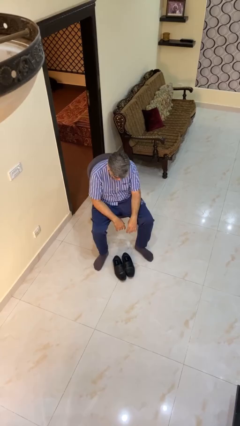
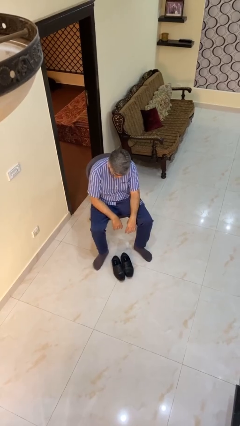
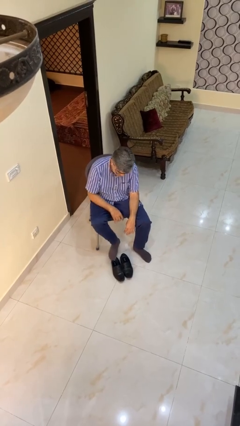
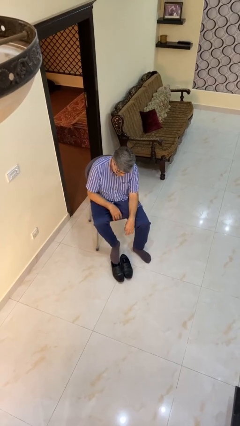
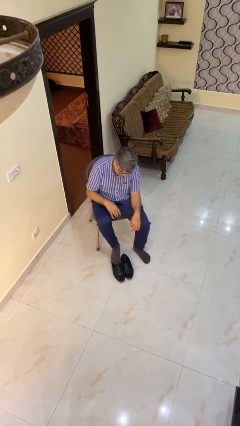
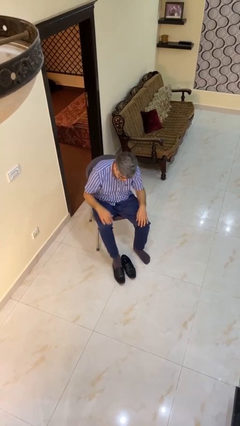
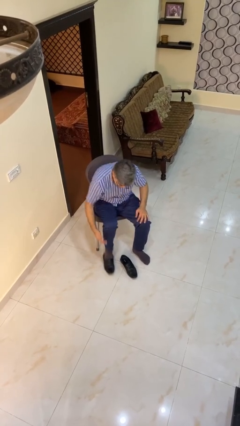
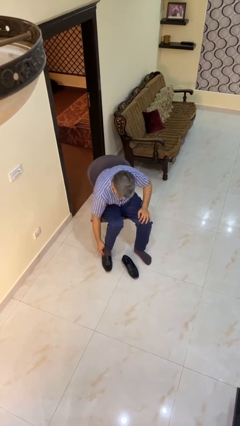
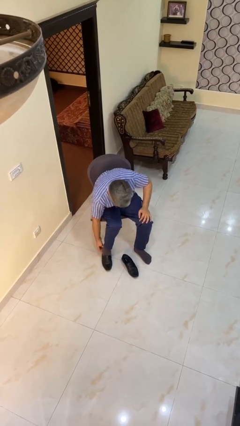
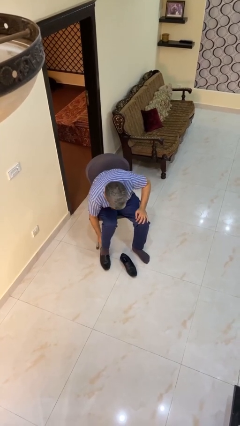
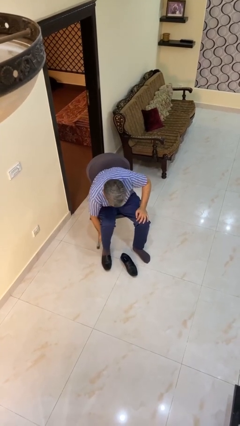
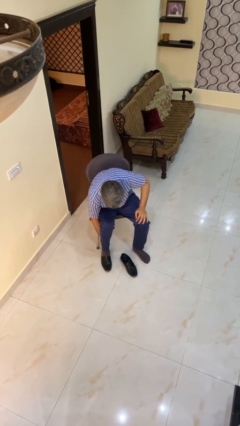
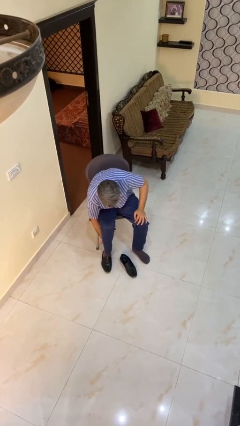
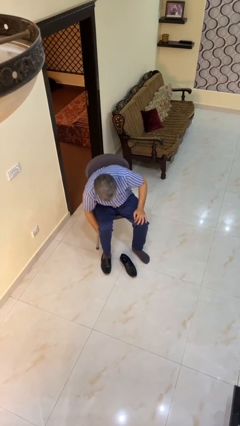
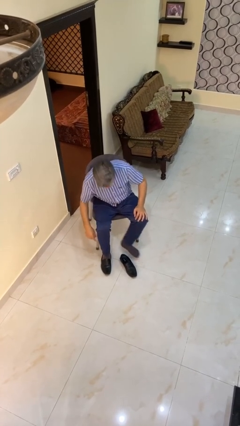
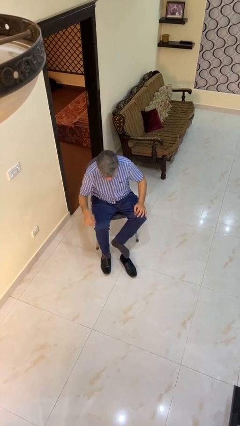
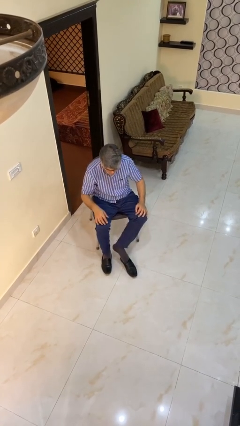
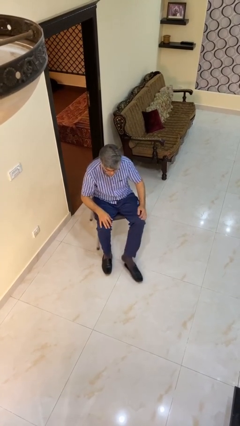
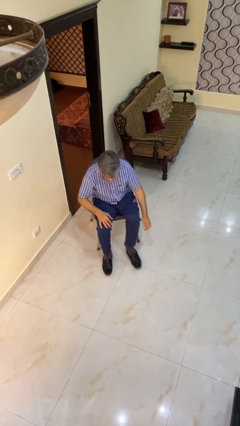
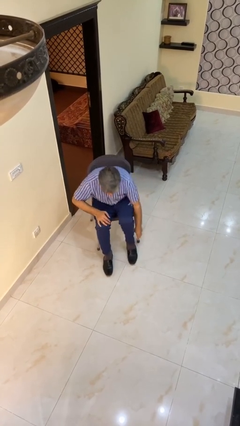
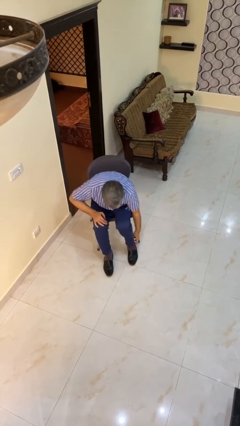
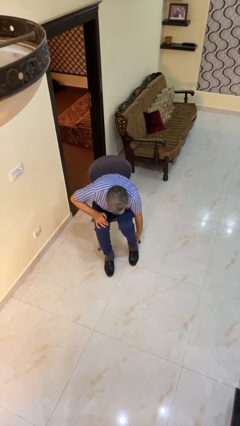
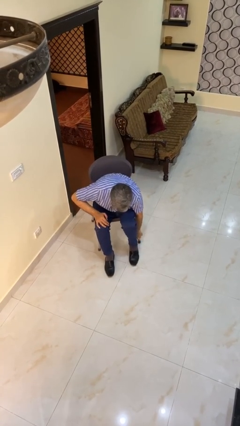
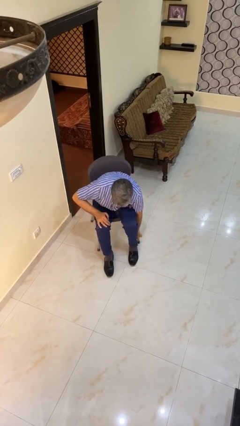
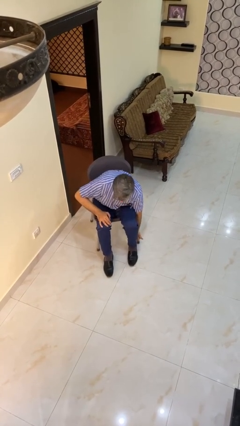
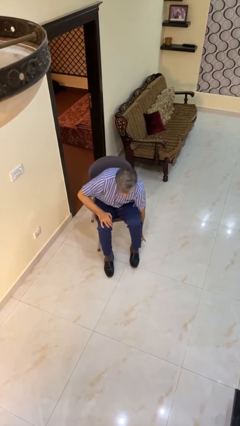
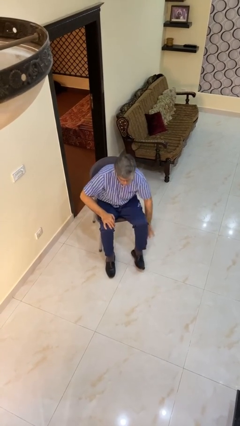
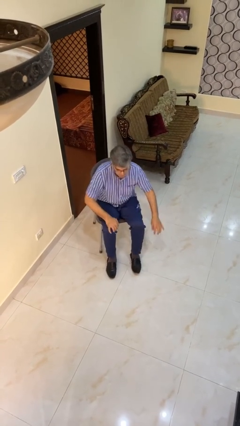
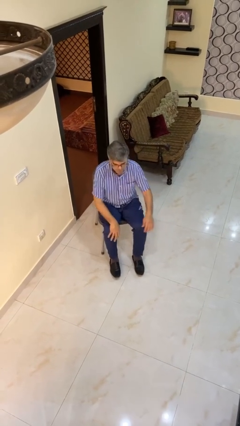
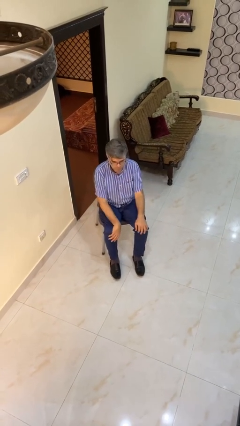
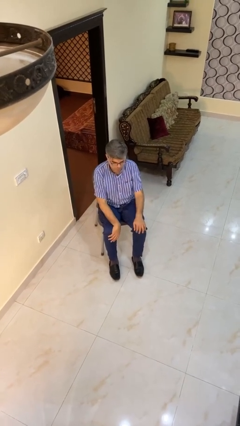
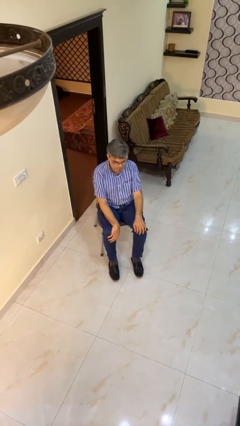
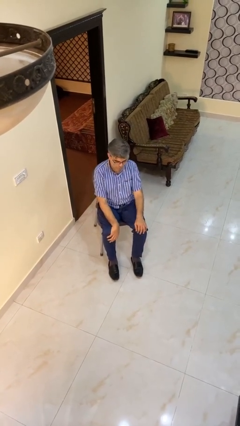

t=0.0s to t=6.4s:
person puts on boots

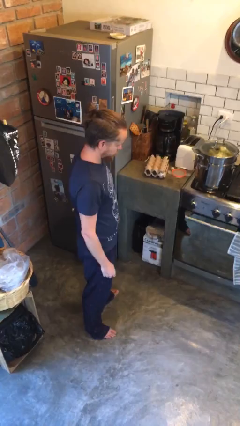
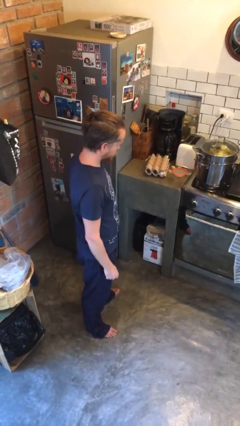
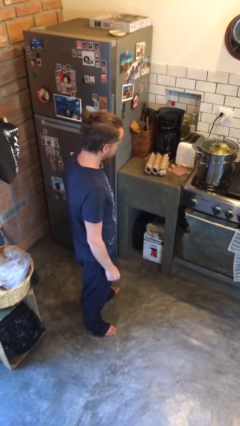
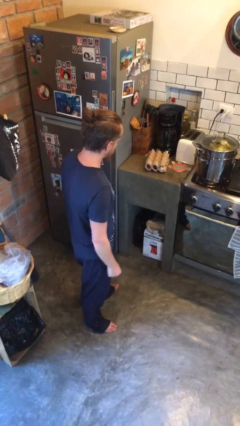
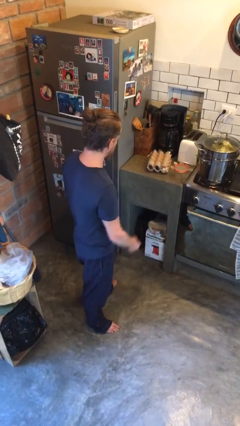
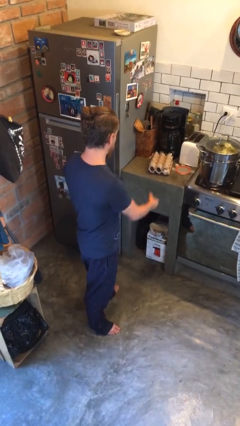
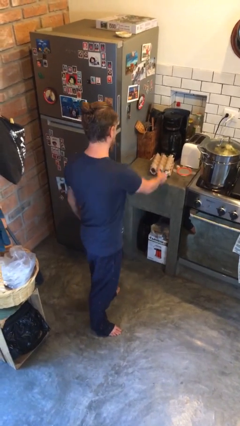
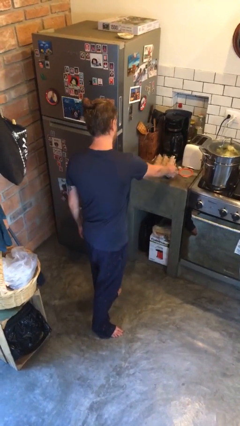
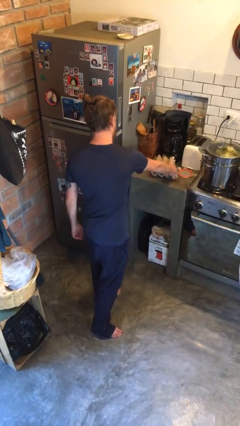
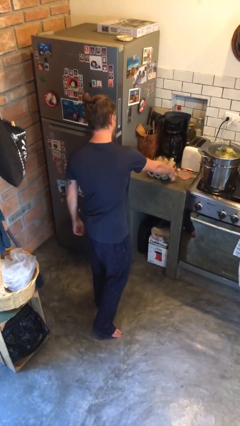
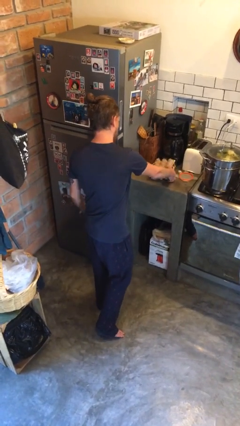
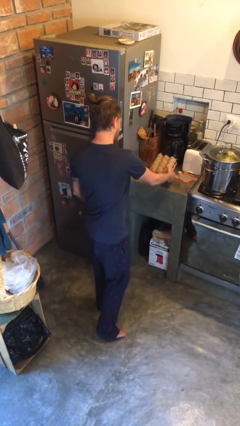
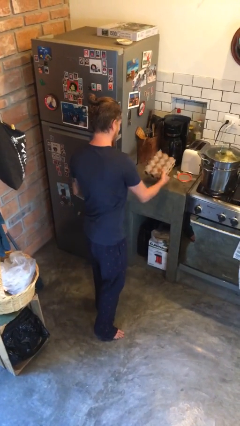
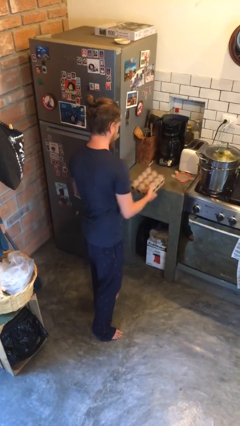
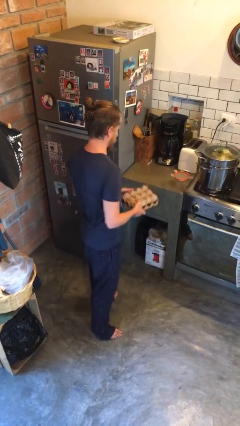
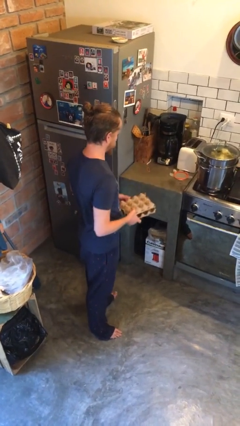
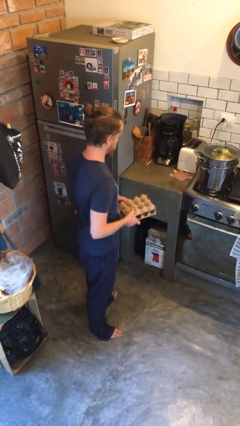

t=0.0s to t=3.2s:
person picks up object from countertop

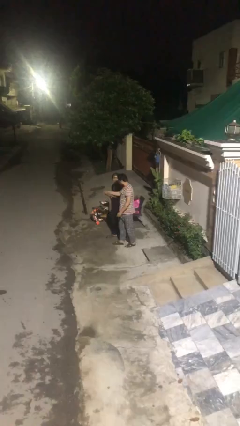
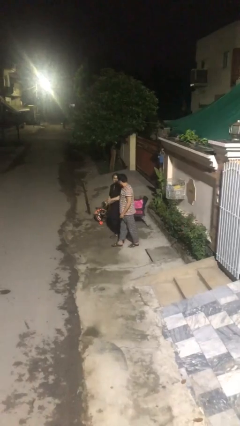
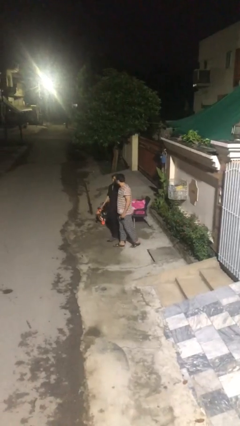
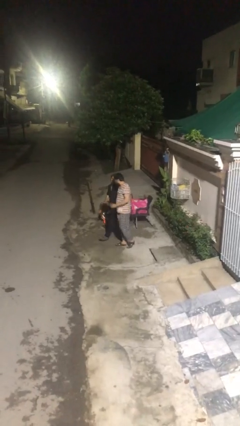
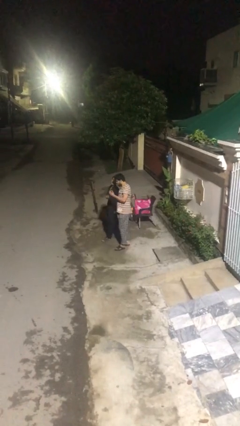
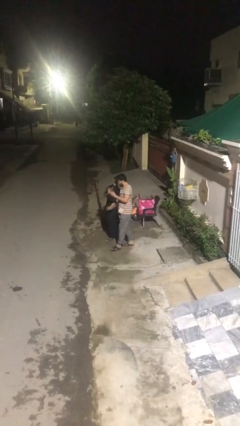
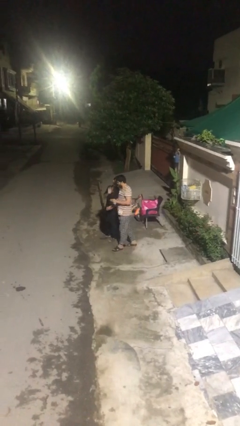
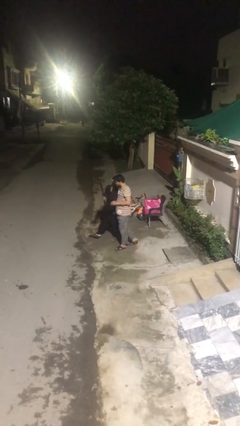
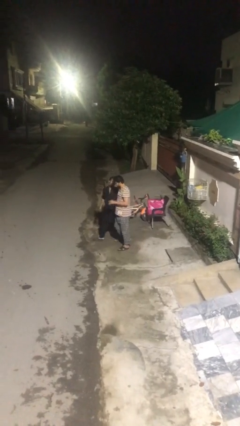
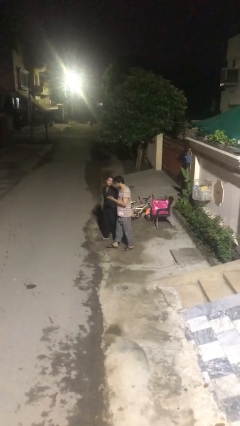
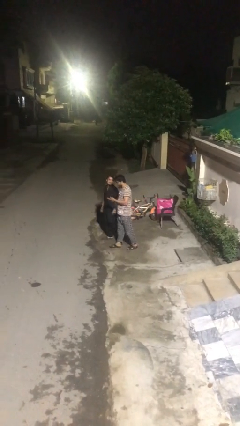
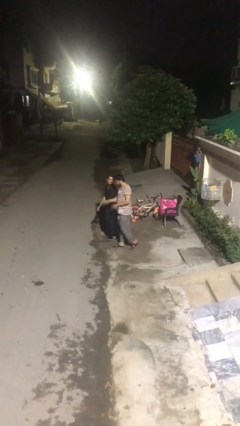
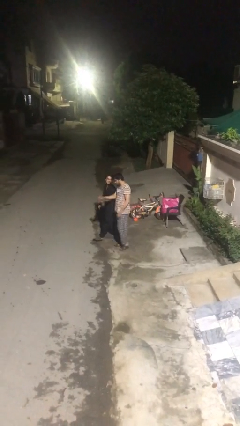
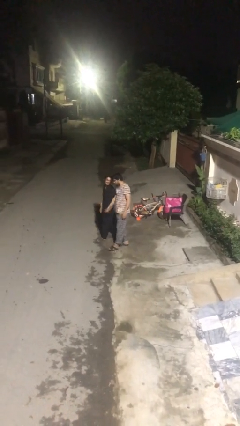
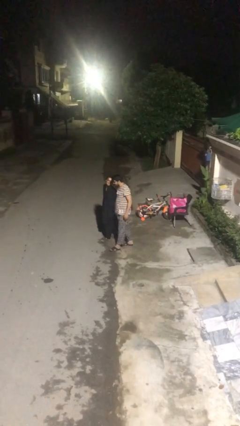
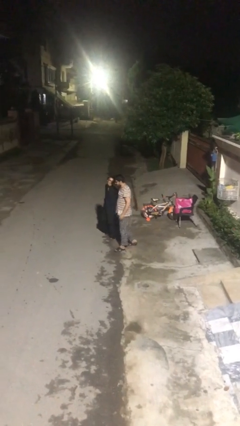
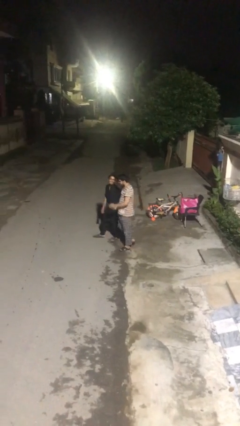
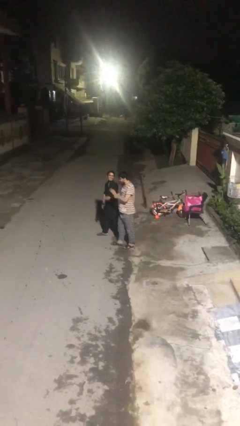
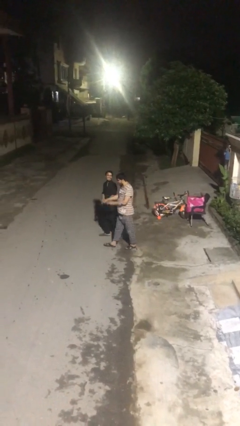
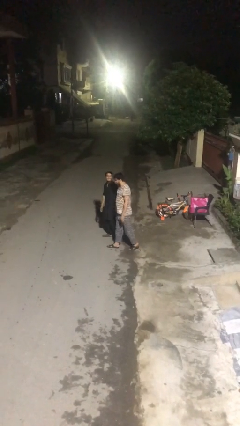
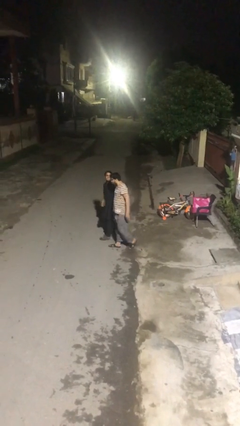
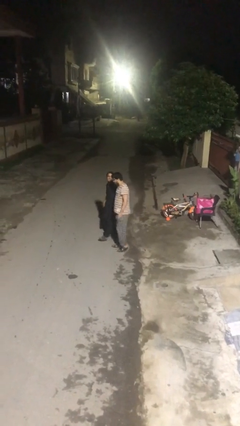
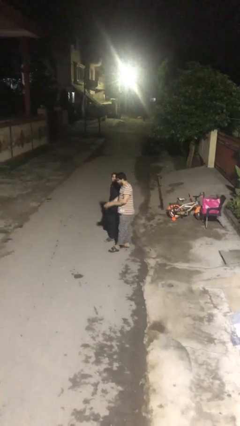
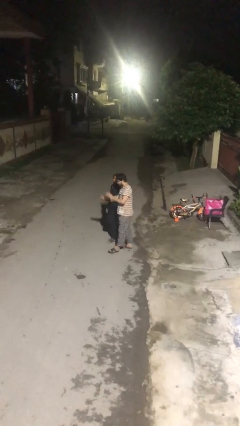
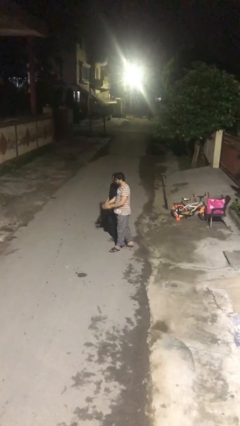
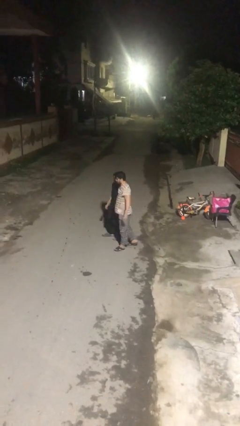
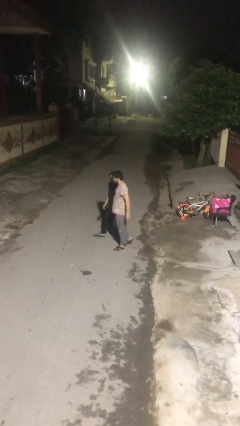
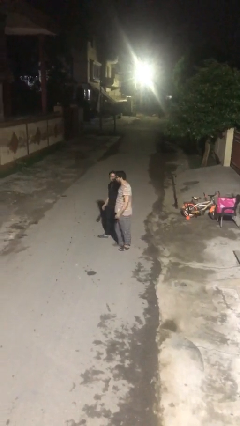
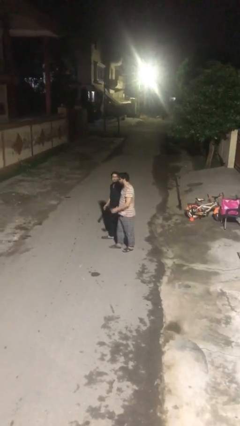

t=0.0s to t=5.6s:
person holds hand

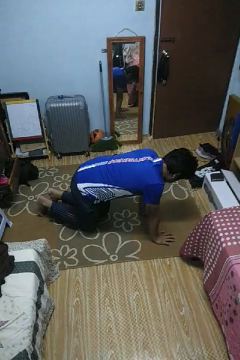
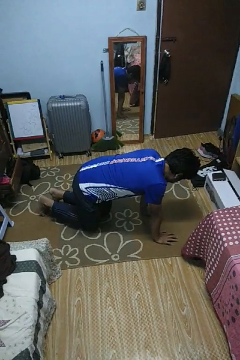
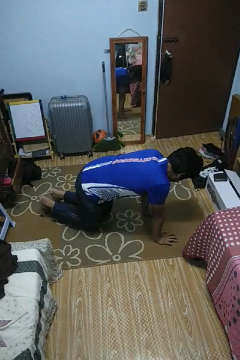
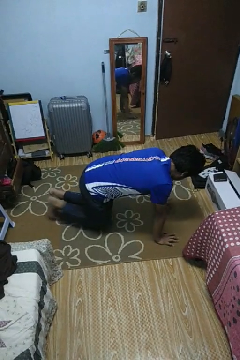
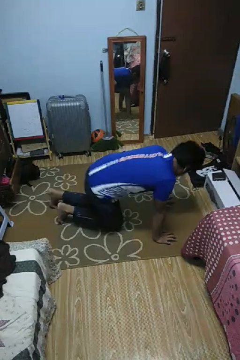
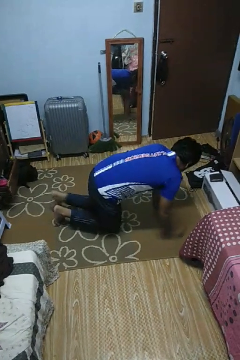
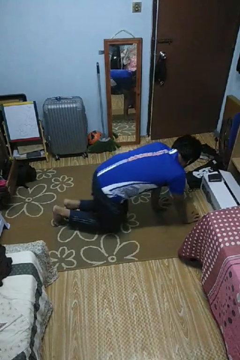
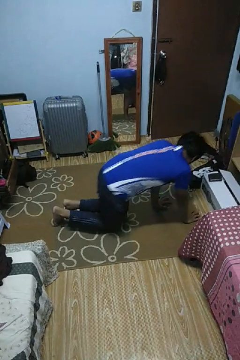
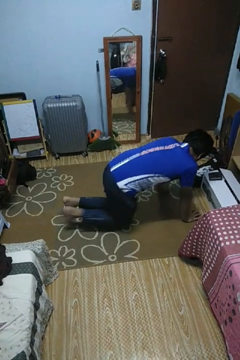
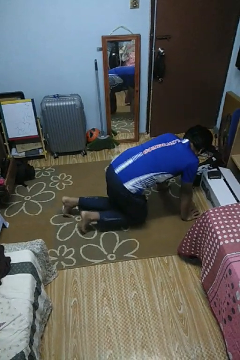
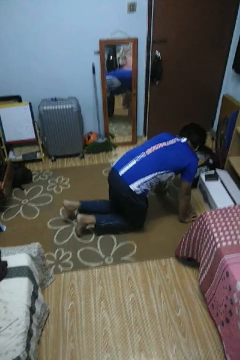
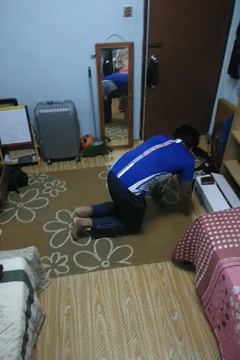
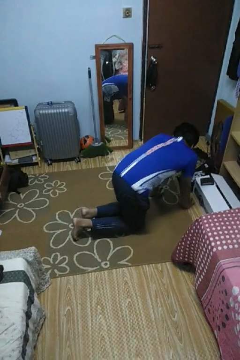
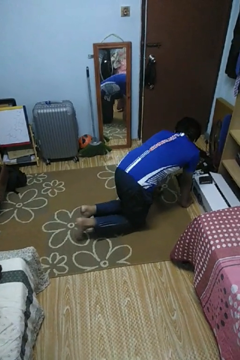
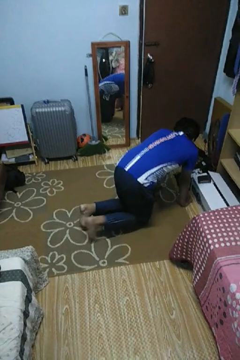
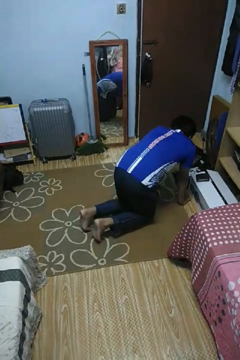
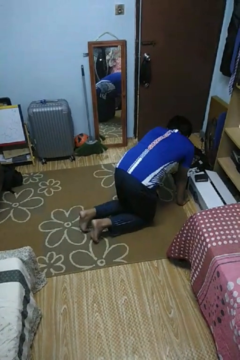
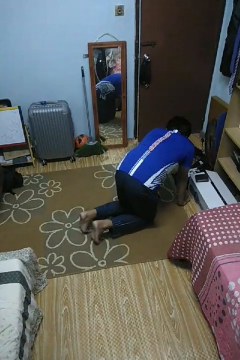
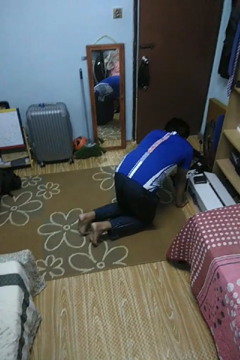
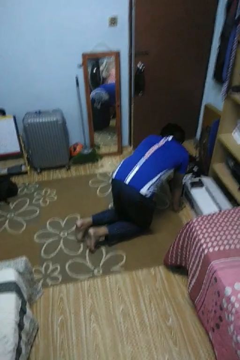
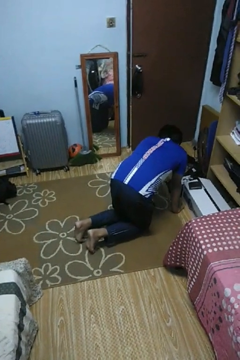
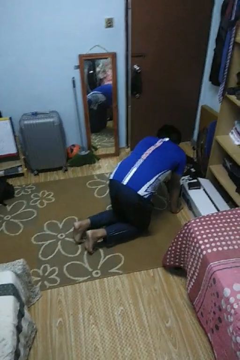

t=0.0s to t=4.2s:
person crawls
